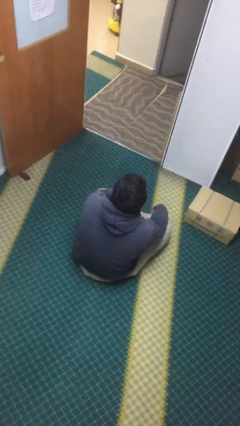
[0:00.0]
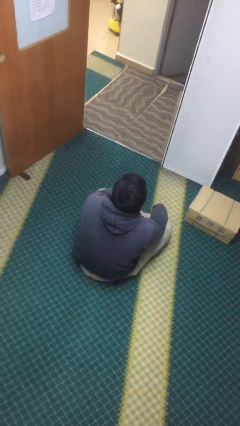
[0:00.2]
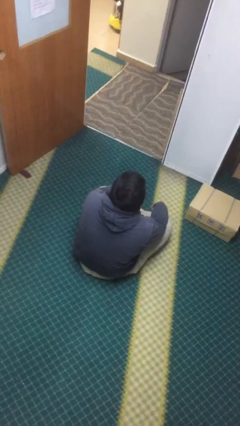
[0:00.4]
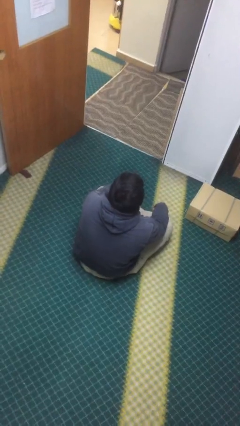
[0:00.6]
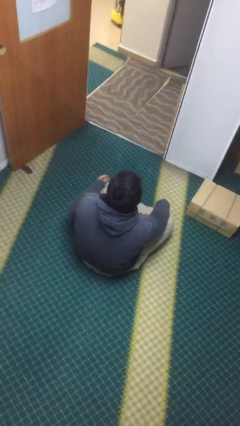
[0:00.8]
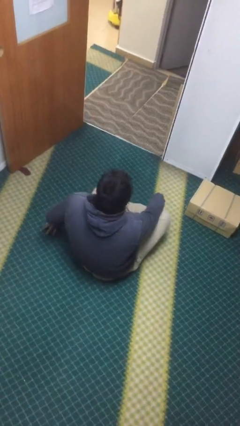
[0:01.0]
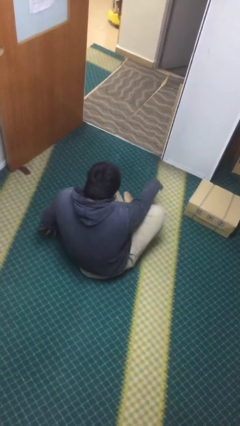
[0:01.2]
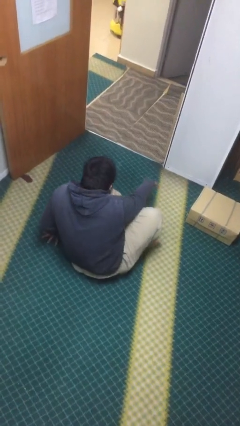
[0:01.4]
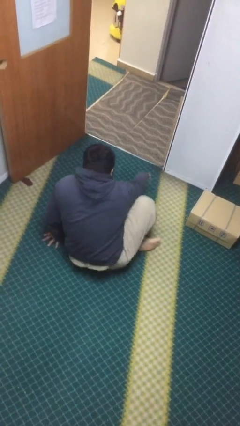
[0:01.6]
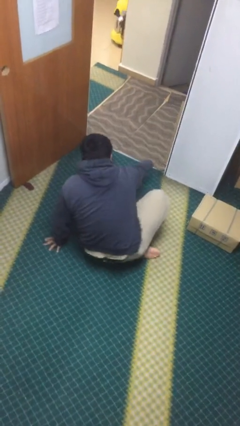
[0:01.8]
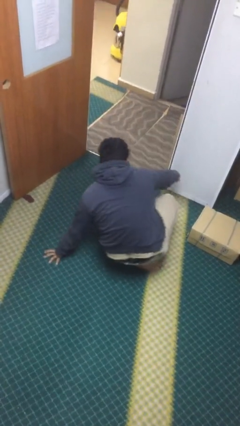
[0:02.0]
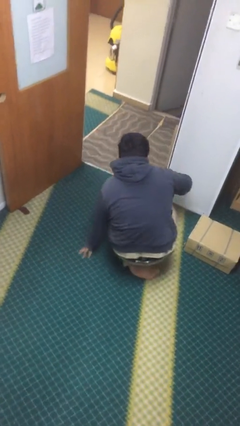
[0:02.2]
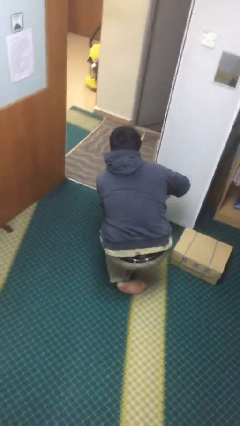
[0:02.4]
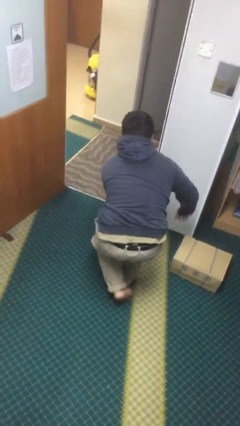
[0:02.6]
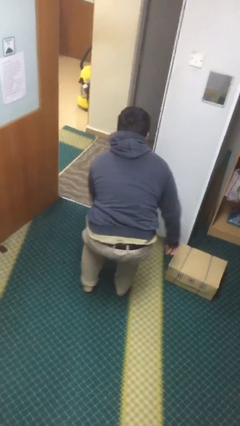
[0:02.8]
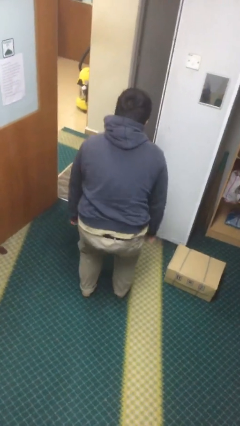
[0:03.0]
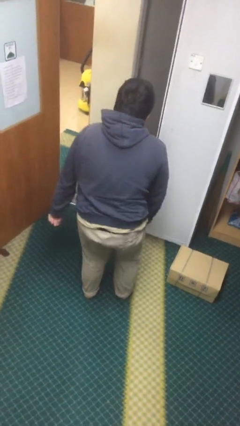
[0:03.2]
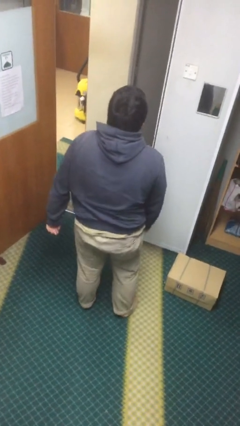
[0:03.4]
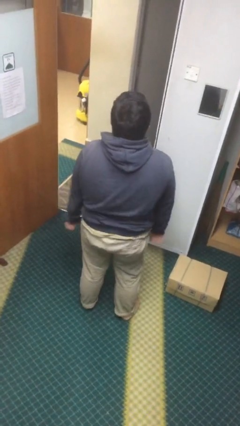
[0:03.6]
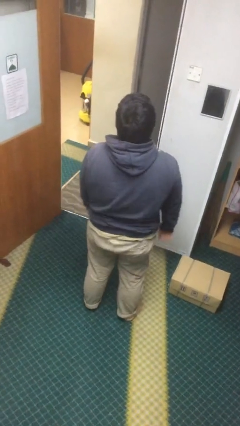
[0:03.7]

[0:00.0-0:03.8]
person stands up from floor

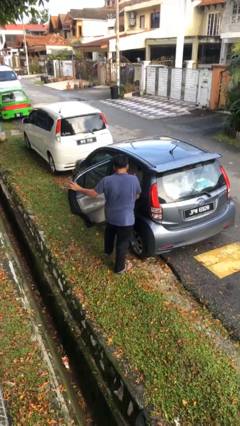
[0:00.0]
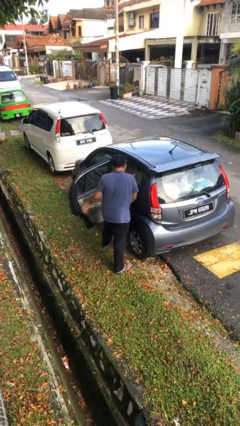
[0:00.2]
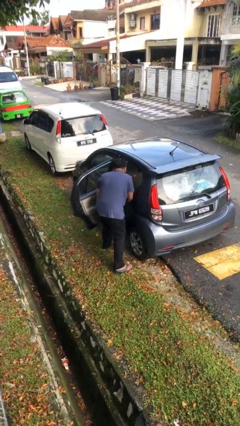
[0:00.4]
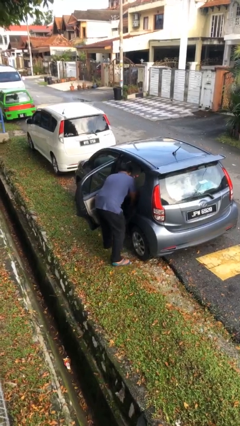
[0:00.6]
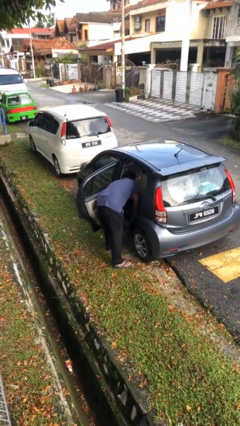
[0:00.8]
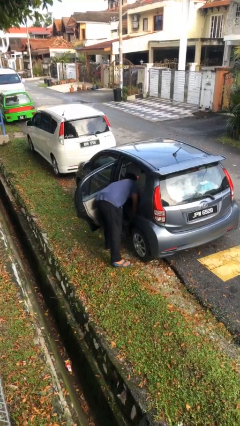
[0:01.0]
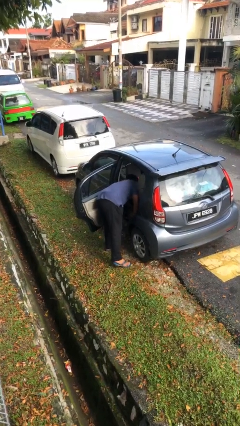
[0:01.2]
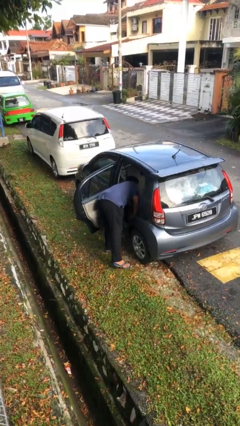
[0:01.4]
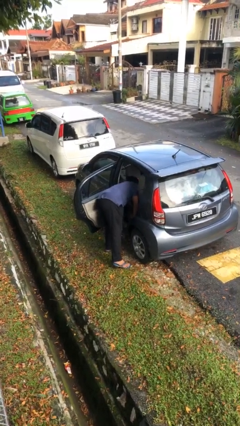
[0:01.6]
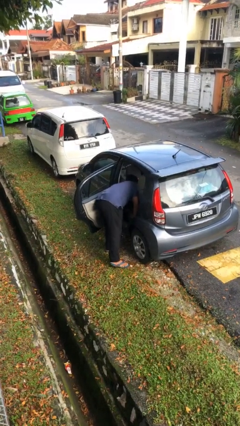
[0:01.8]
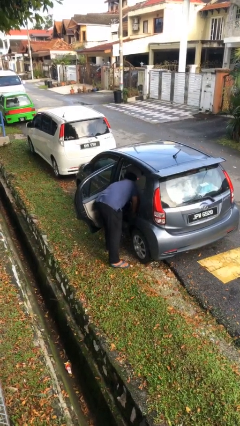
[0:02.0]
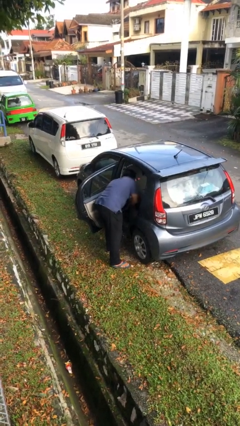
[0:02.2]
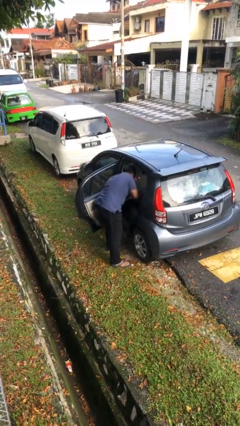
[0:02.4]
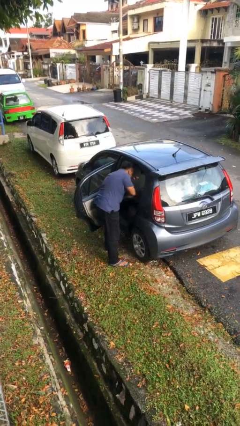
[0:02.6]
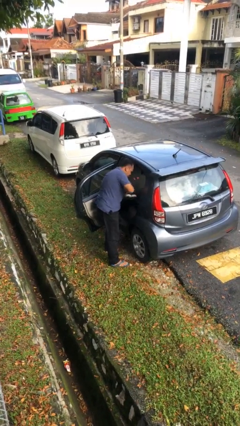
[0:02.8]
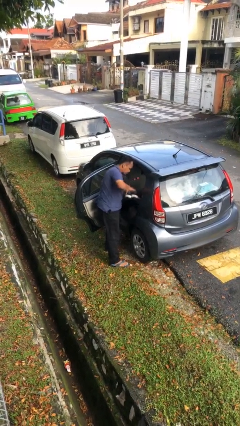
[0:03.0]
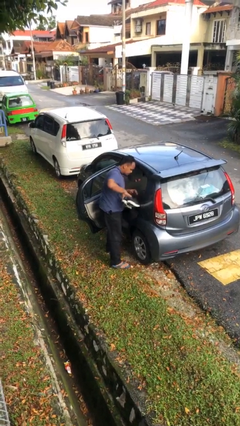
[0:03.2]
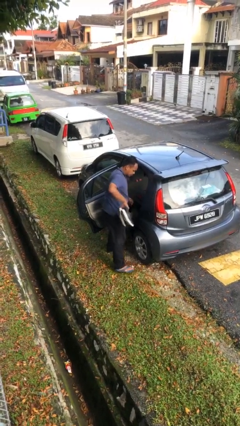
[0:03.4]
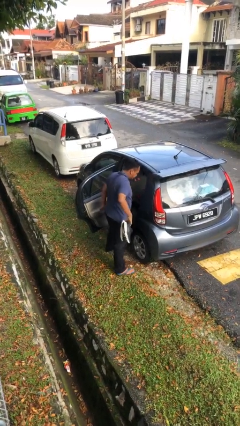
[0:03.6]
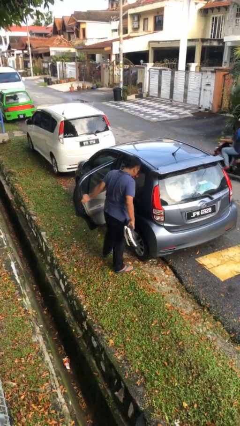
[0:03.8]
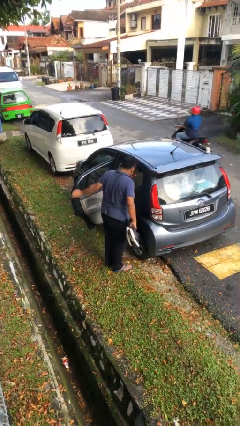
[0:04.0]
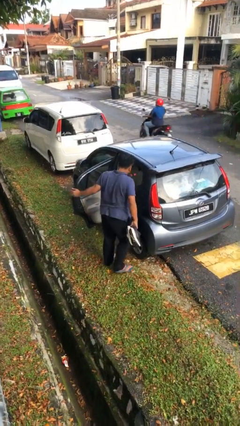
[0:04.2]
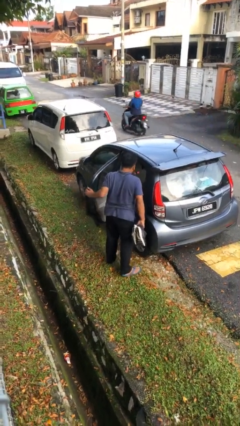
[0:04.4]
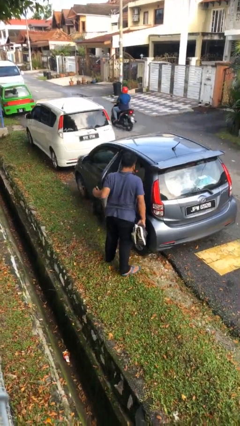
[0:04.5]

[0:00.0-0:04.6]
person unloads car

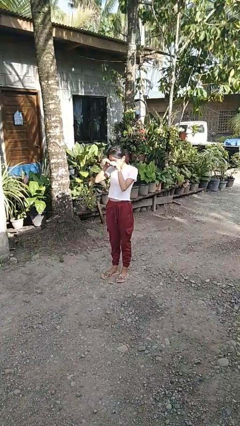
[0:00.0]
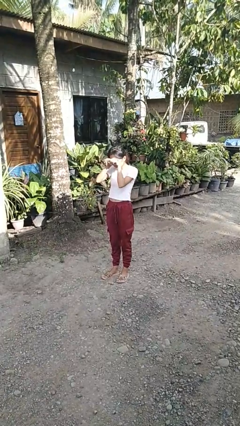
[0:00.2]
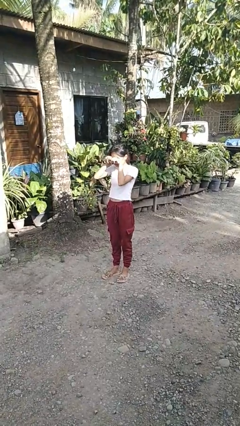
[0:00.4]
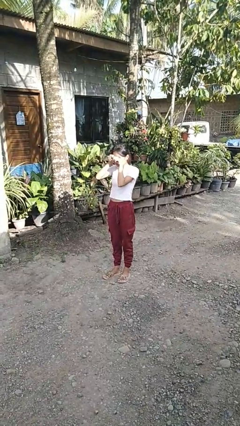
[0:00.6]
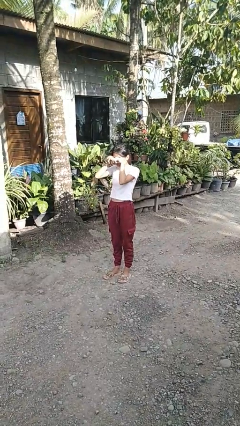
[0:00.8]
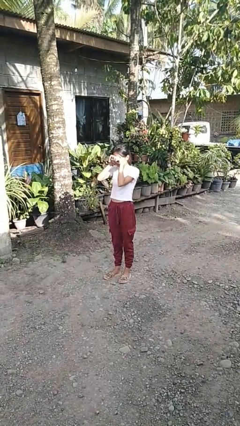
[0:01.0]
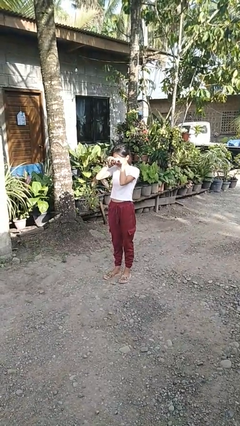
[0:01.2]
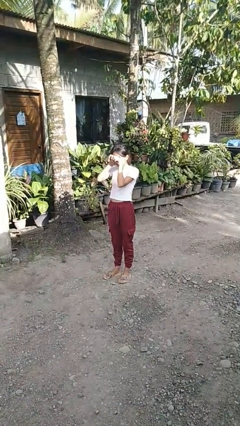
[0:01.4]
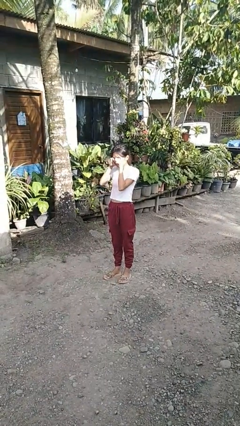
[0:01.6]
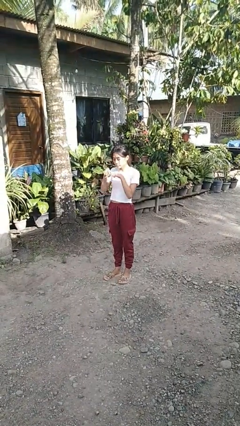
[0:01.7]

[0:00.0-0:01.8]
person rubs eyes

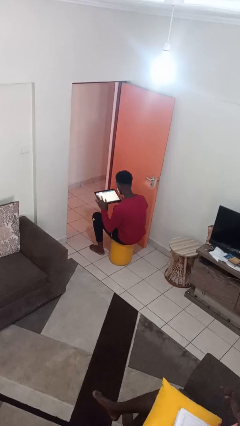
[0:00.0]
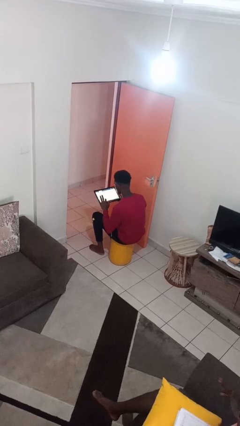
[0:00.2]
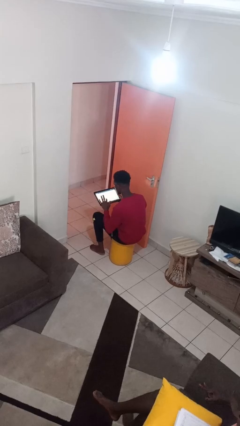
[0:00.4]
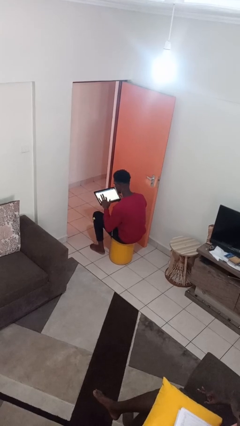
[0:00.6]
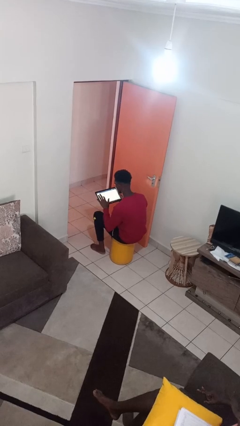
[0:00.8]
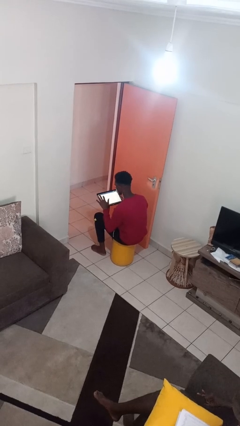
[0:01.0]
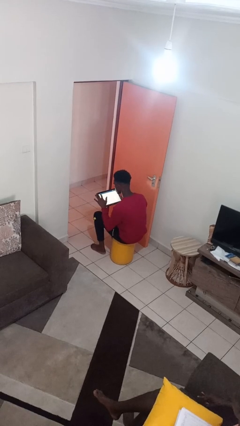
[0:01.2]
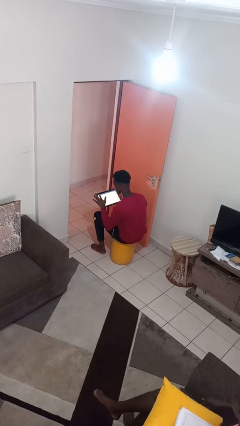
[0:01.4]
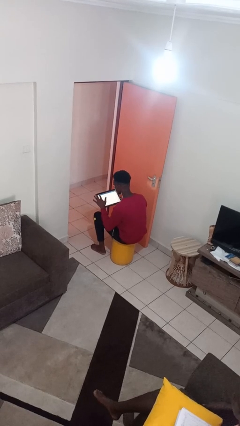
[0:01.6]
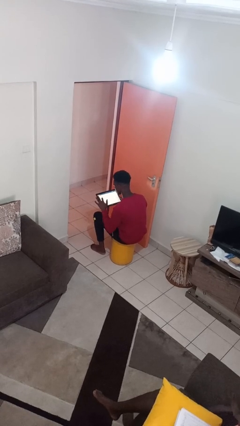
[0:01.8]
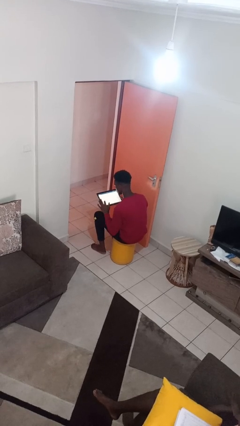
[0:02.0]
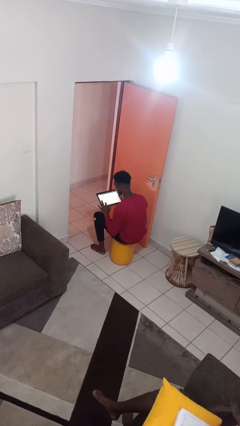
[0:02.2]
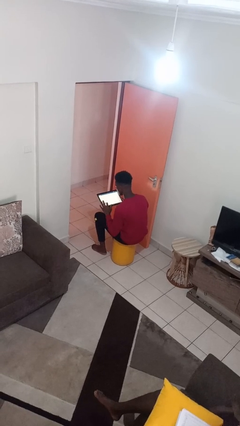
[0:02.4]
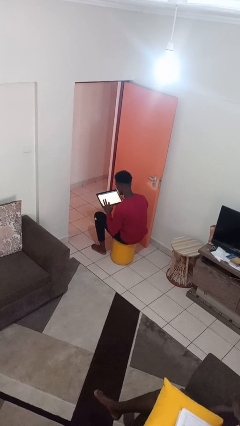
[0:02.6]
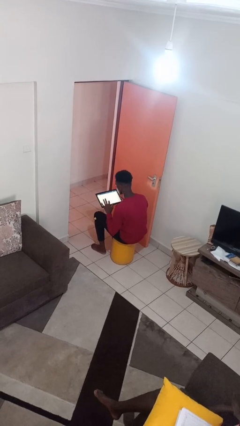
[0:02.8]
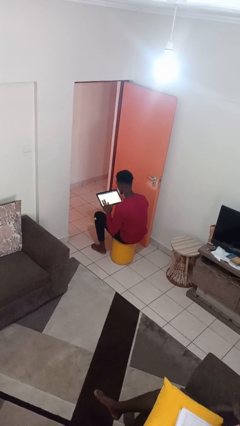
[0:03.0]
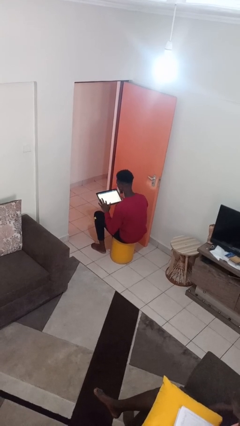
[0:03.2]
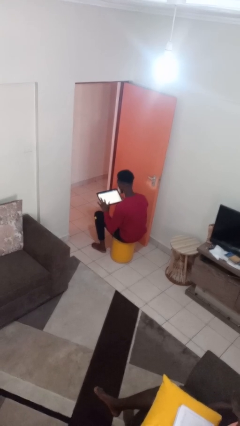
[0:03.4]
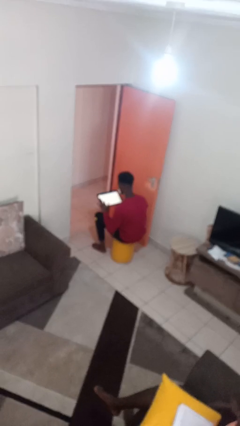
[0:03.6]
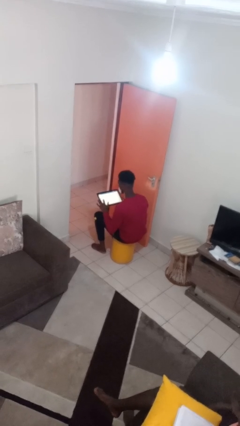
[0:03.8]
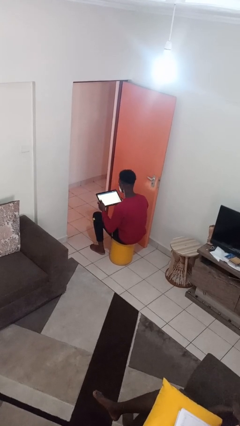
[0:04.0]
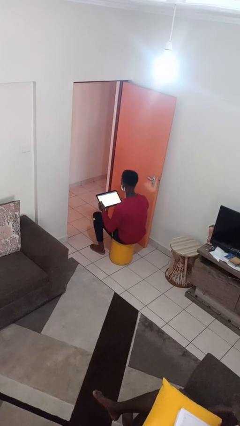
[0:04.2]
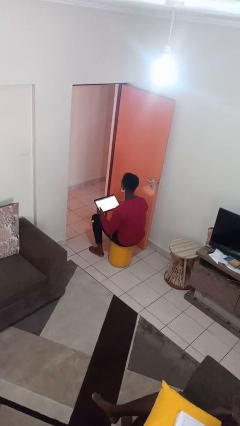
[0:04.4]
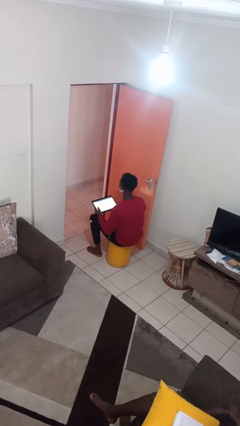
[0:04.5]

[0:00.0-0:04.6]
person interacts with tablet

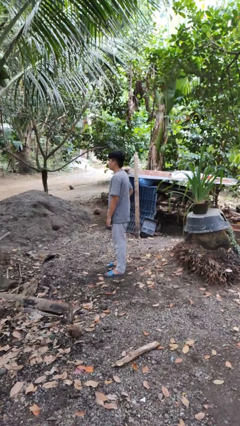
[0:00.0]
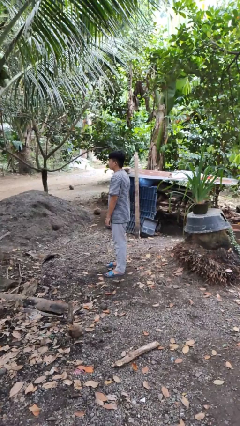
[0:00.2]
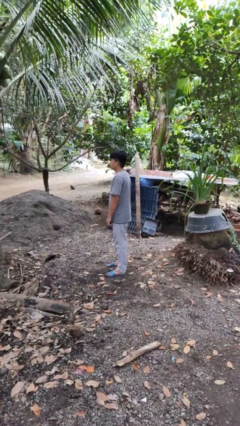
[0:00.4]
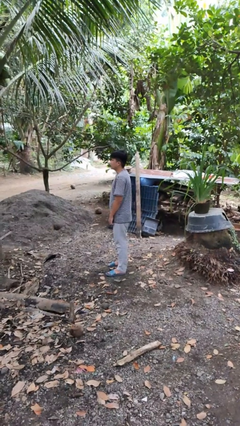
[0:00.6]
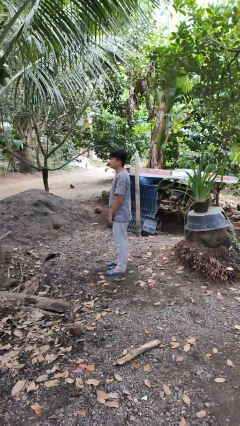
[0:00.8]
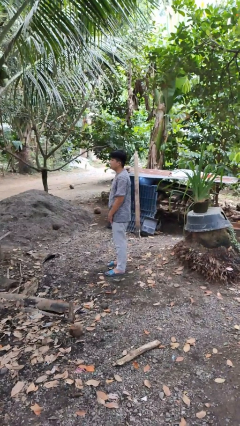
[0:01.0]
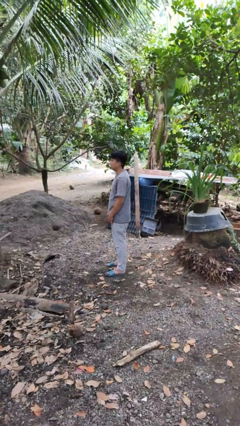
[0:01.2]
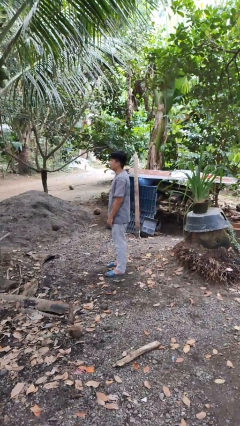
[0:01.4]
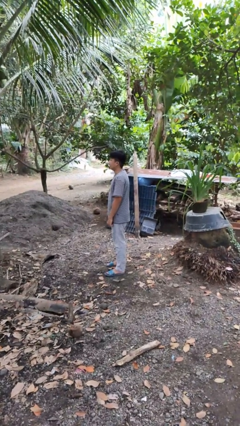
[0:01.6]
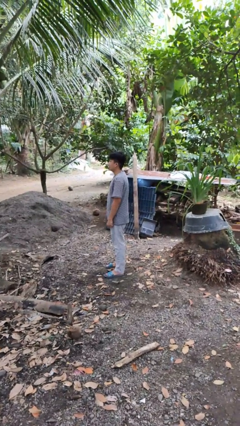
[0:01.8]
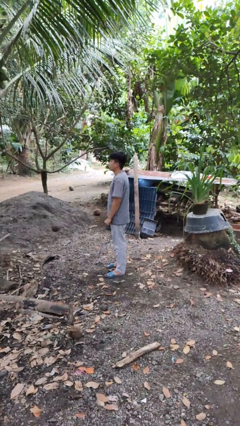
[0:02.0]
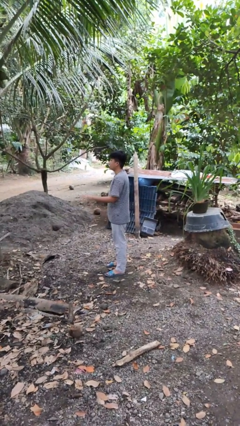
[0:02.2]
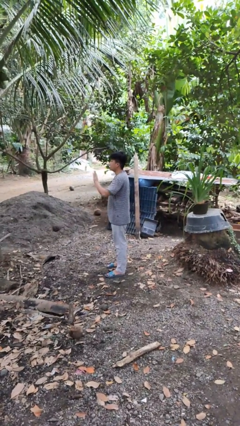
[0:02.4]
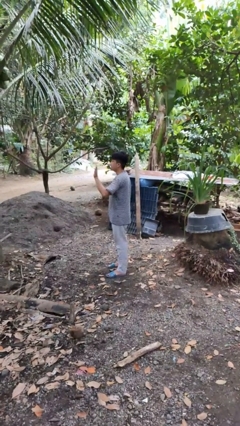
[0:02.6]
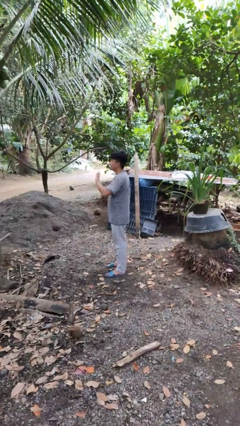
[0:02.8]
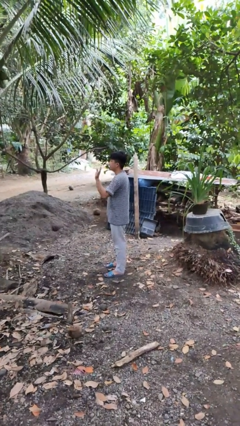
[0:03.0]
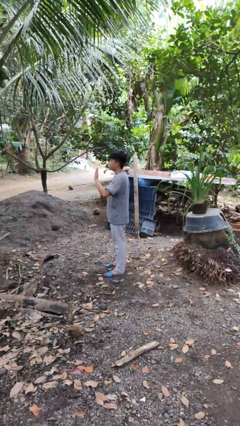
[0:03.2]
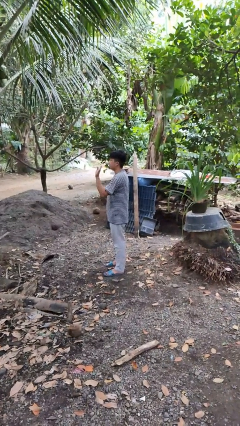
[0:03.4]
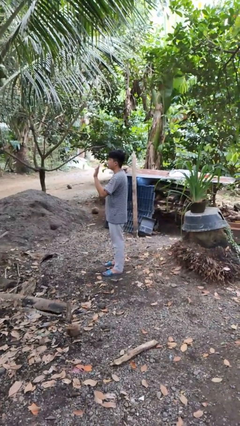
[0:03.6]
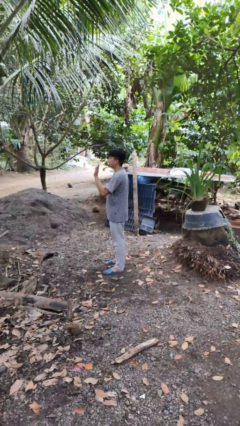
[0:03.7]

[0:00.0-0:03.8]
person waves at person
